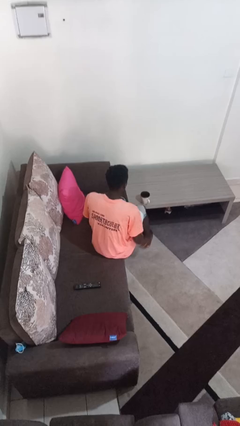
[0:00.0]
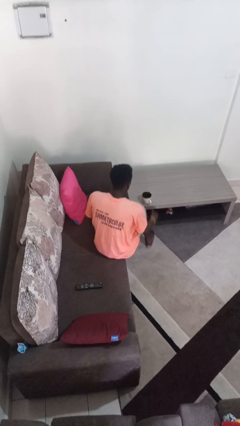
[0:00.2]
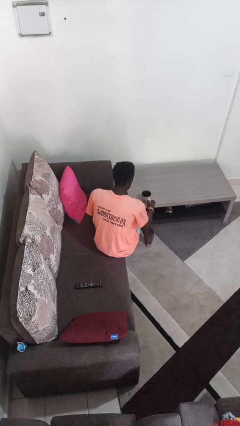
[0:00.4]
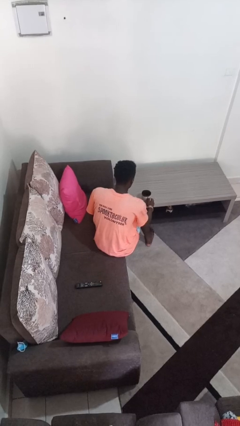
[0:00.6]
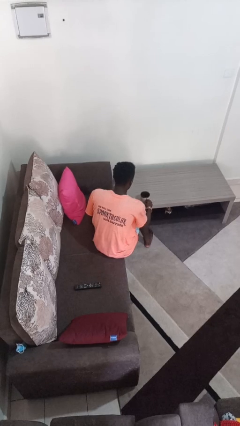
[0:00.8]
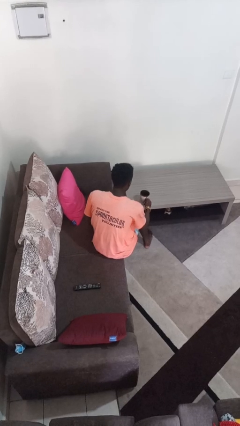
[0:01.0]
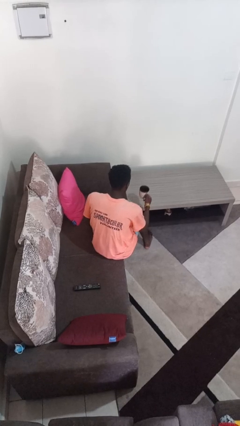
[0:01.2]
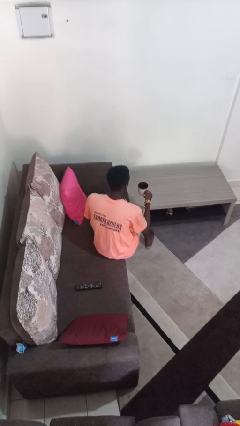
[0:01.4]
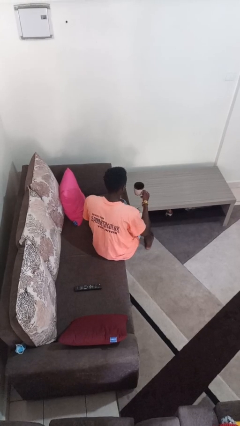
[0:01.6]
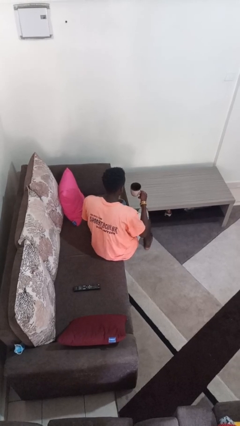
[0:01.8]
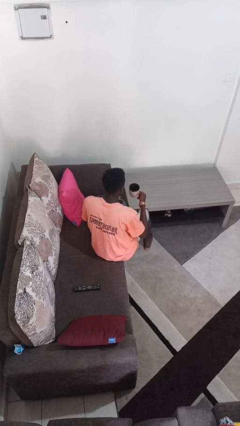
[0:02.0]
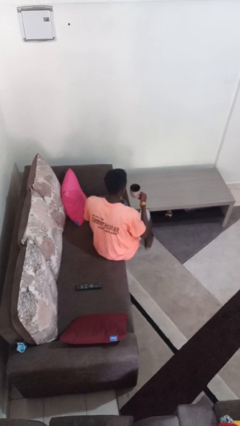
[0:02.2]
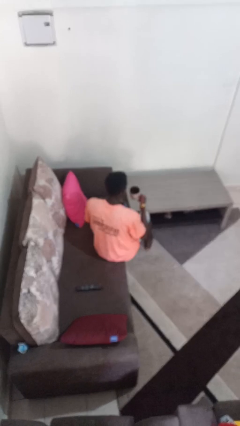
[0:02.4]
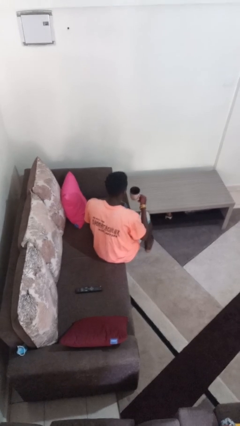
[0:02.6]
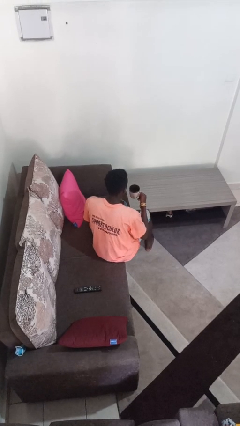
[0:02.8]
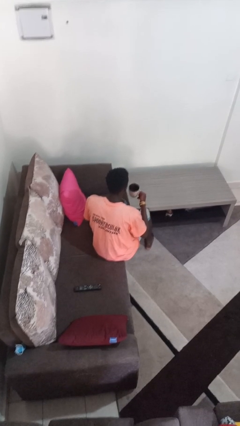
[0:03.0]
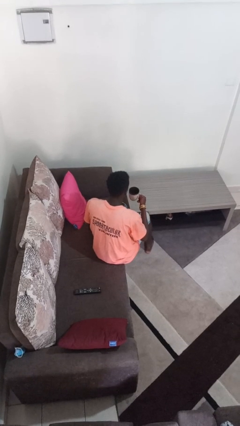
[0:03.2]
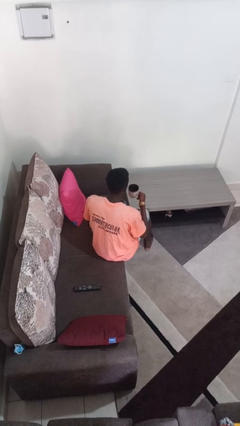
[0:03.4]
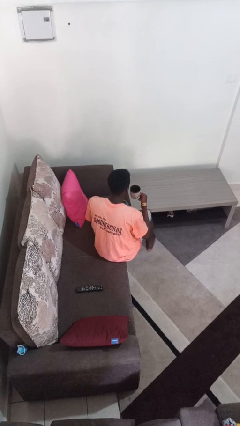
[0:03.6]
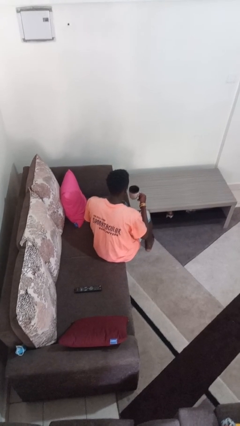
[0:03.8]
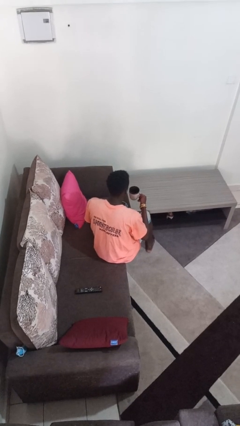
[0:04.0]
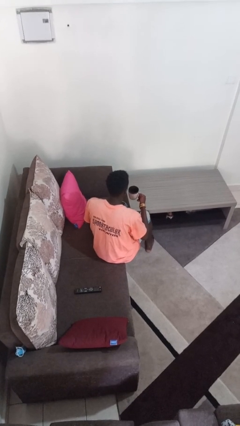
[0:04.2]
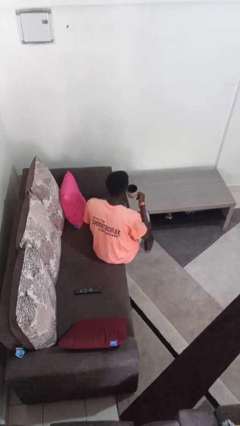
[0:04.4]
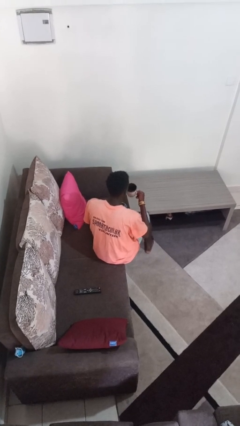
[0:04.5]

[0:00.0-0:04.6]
person picks up object from table

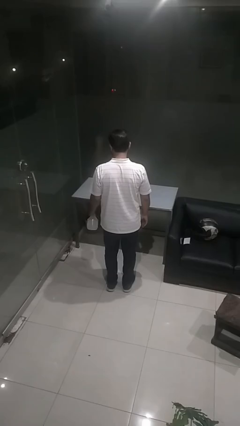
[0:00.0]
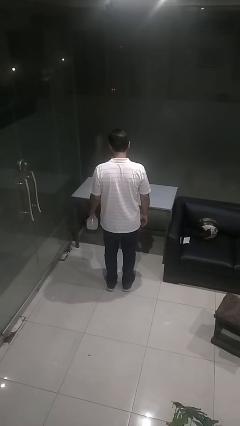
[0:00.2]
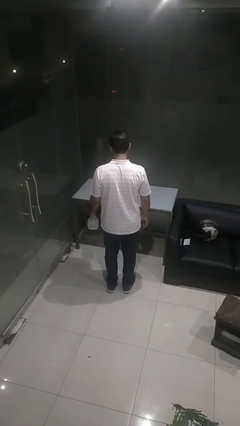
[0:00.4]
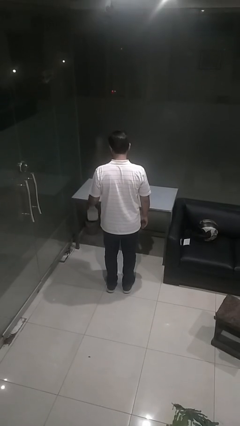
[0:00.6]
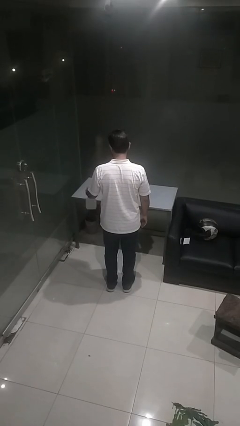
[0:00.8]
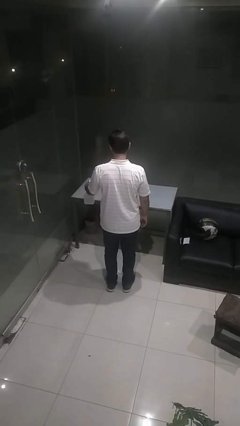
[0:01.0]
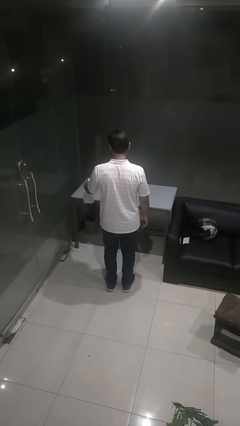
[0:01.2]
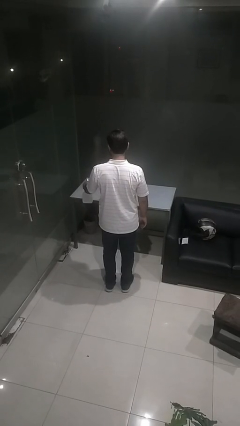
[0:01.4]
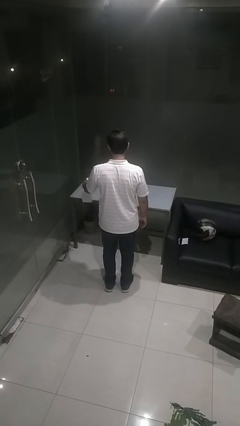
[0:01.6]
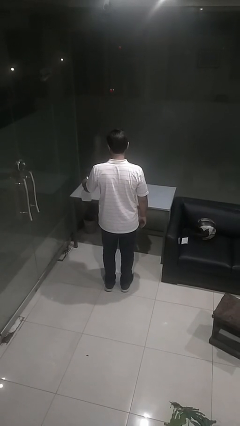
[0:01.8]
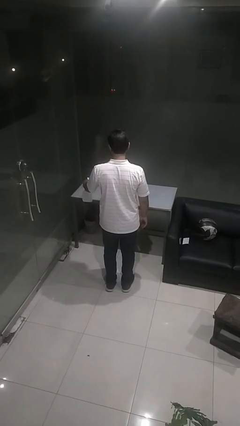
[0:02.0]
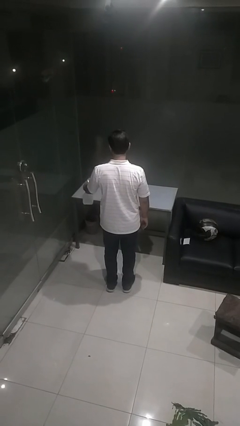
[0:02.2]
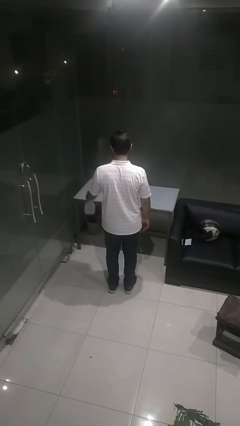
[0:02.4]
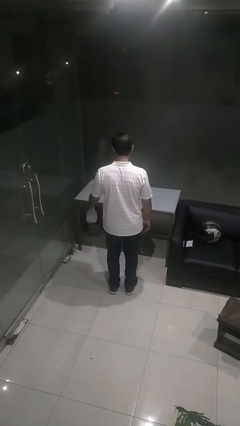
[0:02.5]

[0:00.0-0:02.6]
person sprays from bottle

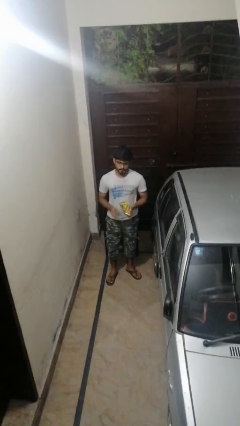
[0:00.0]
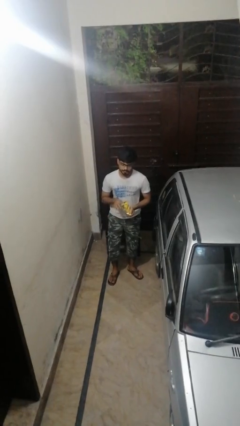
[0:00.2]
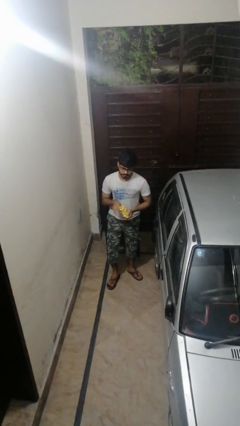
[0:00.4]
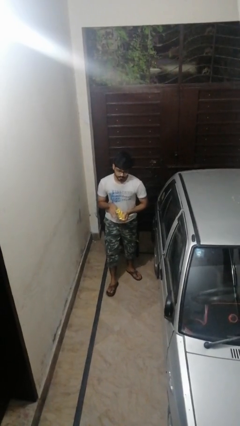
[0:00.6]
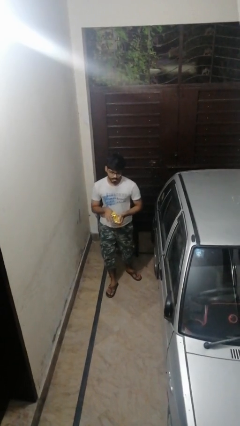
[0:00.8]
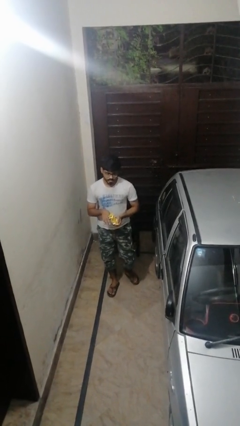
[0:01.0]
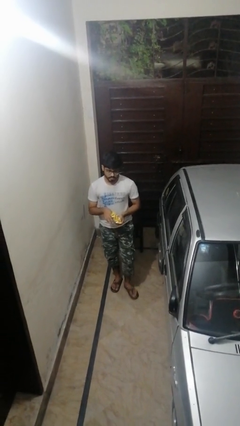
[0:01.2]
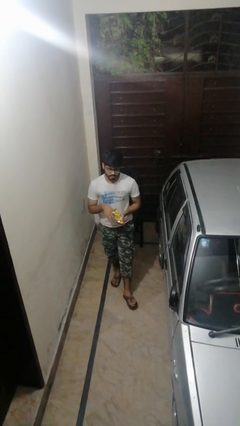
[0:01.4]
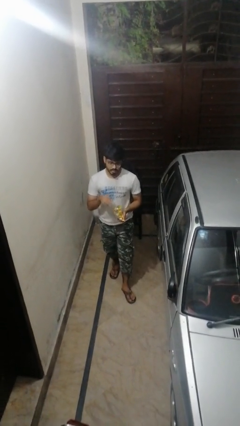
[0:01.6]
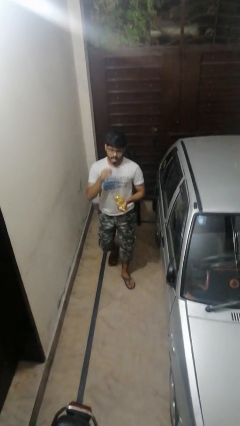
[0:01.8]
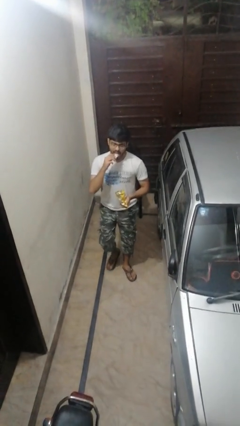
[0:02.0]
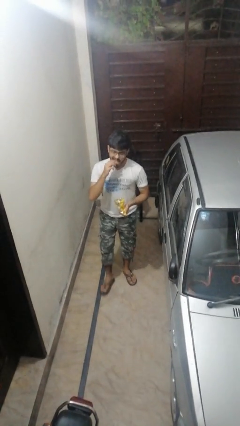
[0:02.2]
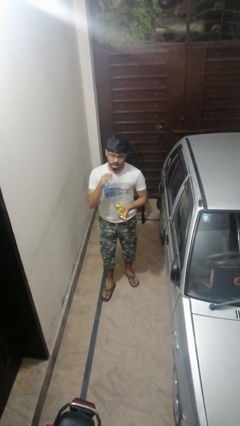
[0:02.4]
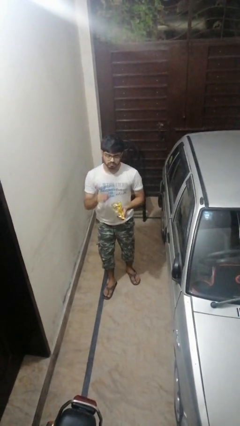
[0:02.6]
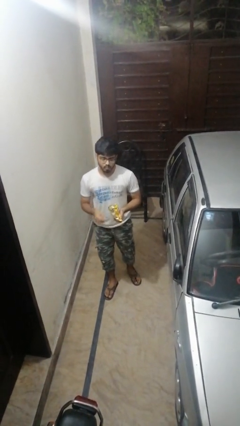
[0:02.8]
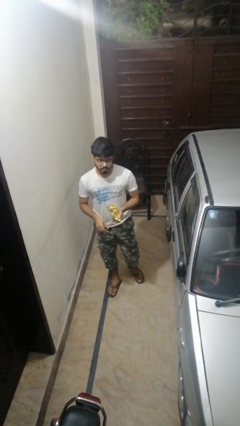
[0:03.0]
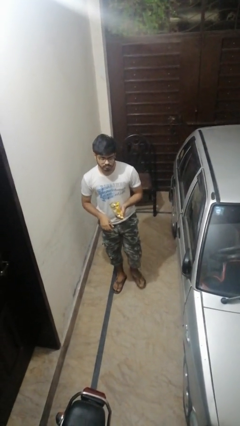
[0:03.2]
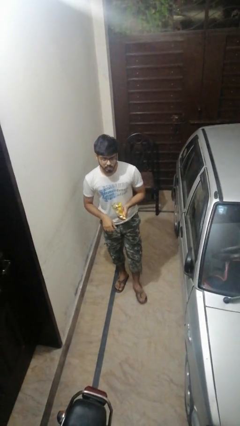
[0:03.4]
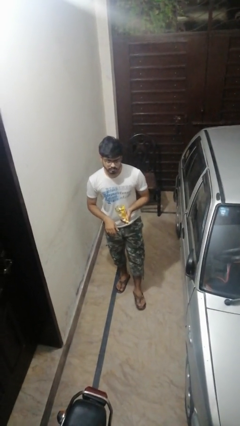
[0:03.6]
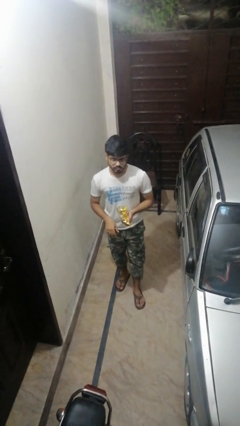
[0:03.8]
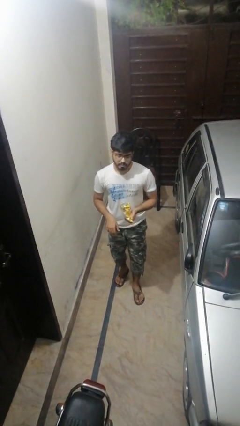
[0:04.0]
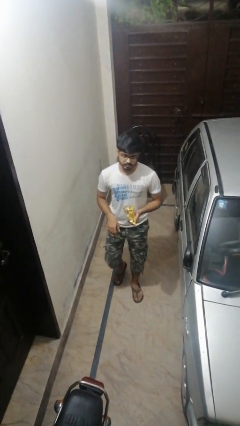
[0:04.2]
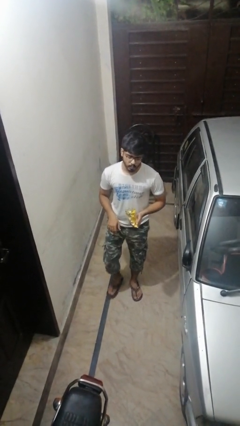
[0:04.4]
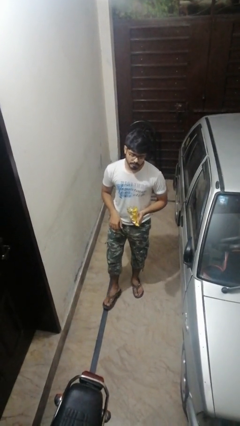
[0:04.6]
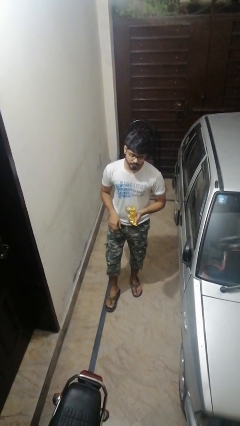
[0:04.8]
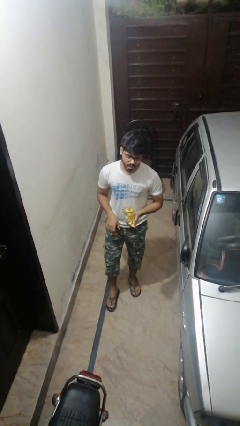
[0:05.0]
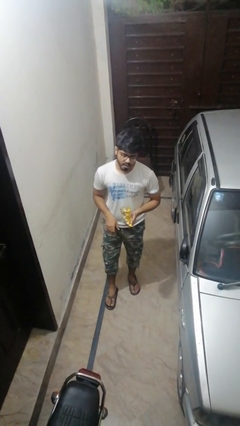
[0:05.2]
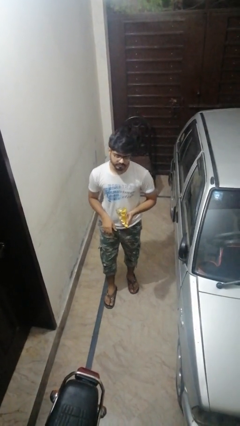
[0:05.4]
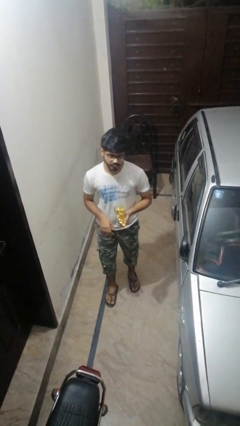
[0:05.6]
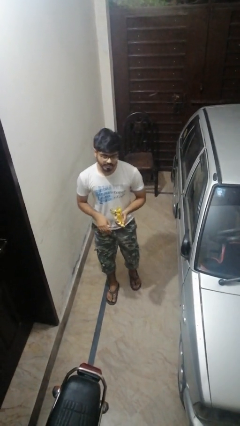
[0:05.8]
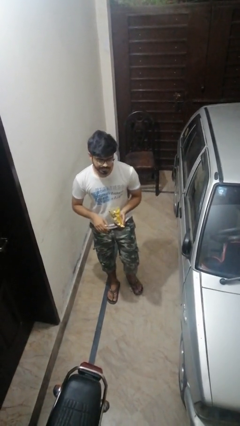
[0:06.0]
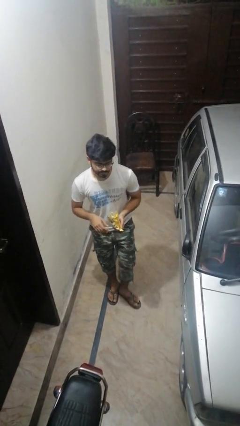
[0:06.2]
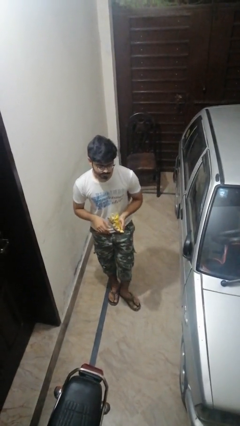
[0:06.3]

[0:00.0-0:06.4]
person eats snack from bag

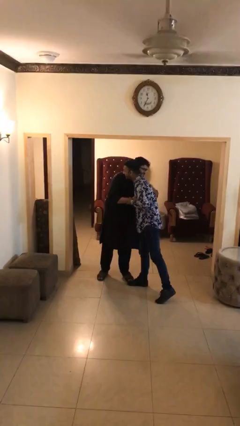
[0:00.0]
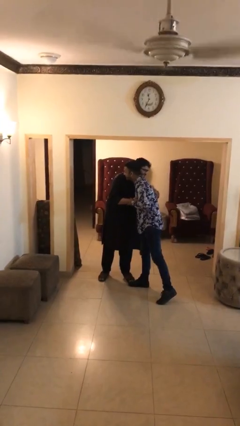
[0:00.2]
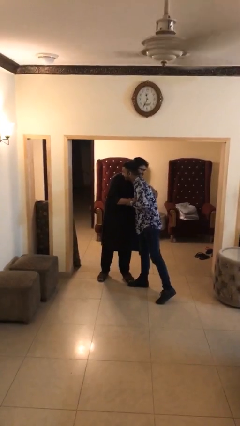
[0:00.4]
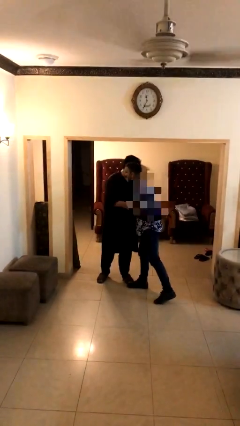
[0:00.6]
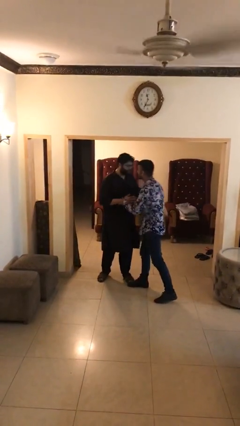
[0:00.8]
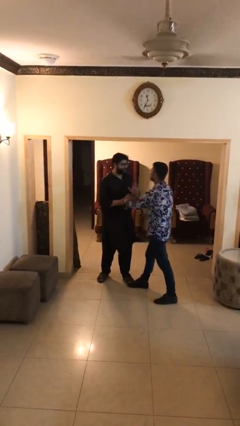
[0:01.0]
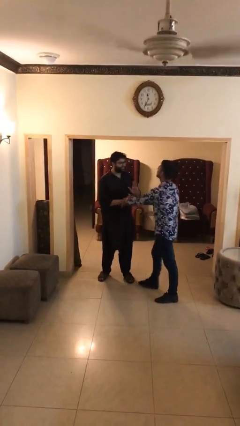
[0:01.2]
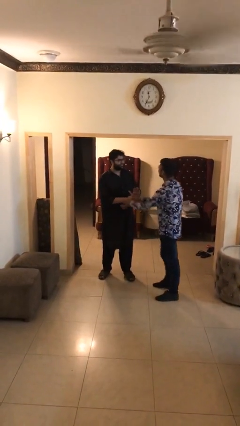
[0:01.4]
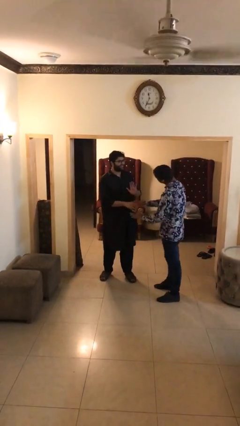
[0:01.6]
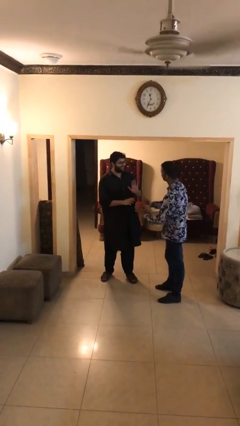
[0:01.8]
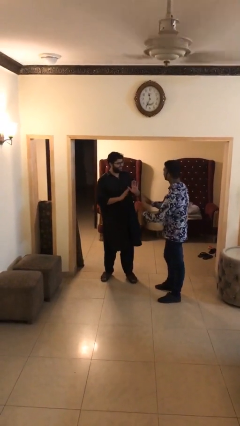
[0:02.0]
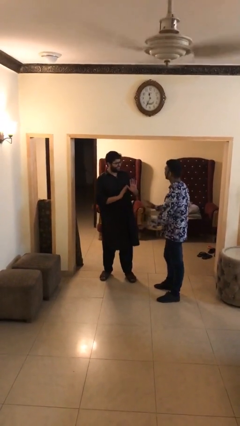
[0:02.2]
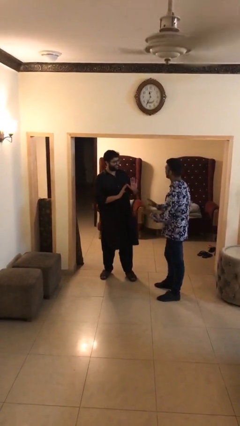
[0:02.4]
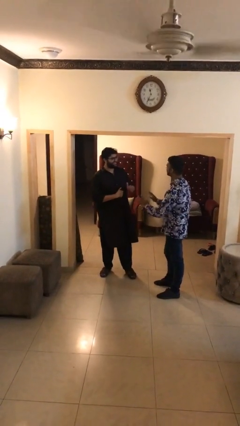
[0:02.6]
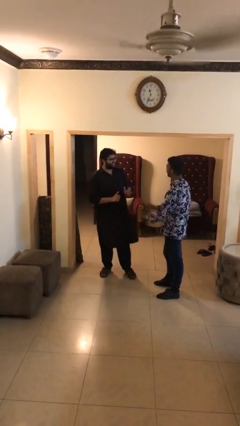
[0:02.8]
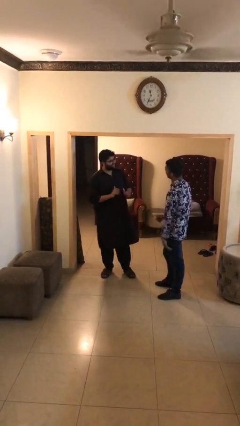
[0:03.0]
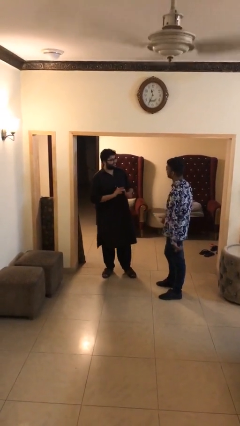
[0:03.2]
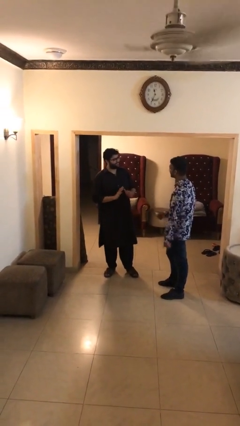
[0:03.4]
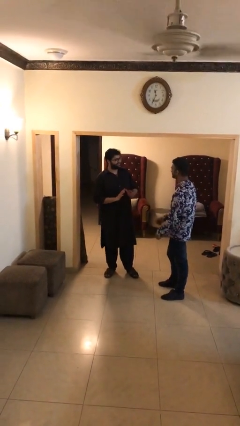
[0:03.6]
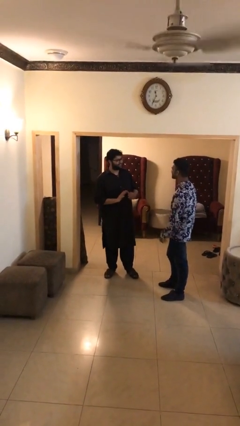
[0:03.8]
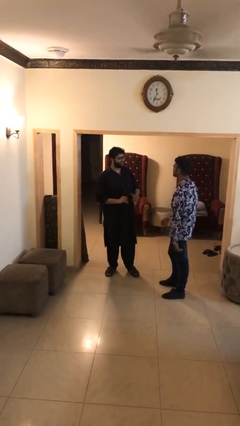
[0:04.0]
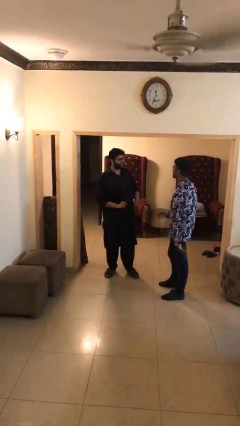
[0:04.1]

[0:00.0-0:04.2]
person talks to person

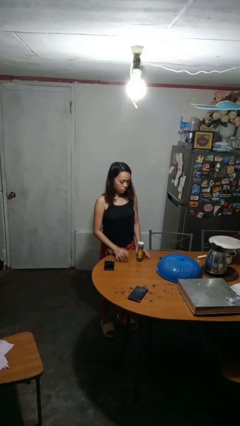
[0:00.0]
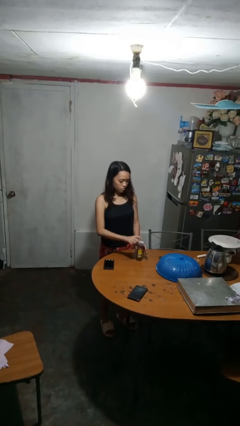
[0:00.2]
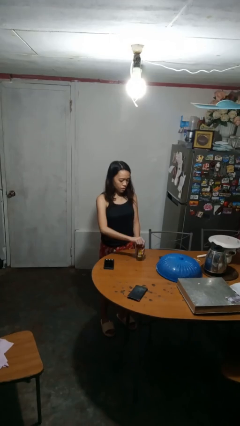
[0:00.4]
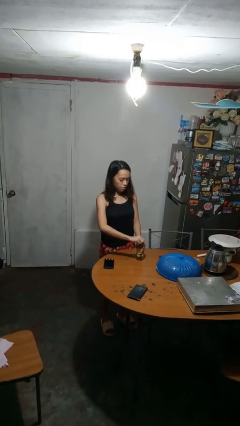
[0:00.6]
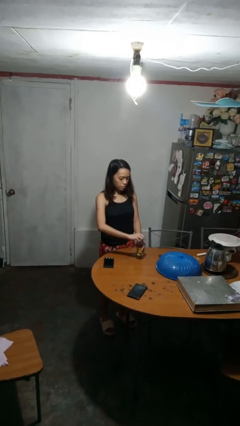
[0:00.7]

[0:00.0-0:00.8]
person opens jar
